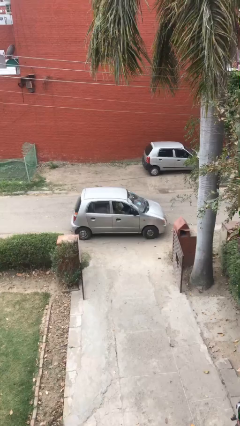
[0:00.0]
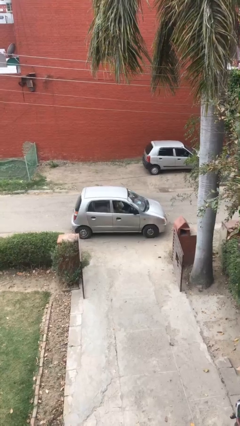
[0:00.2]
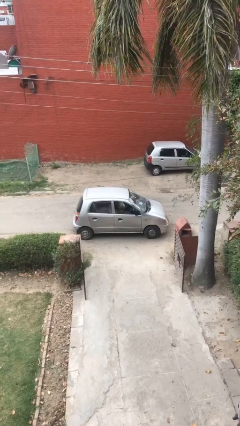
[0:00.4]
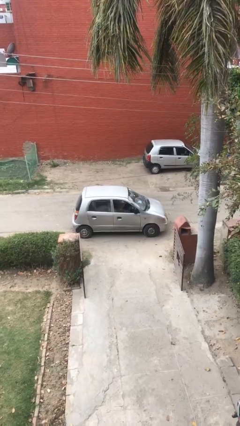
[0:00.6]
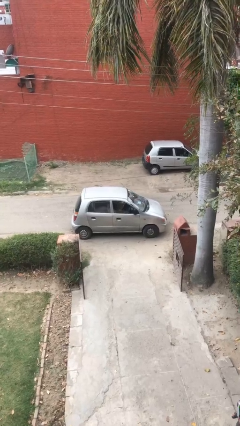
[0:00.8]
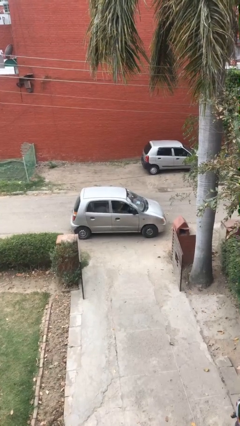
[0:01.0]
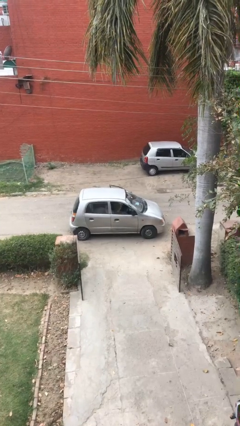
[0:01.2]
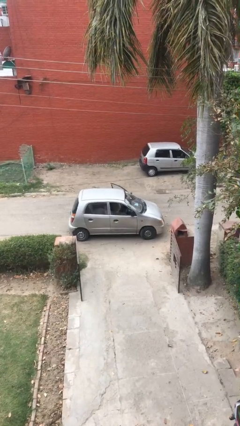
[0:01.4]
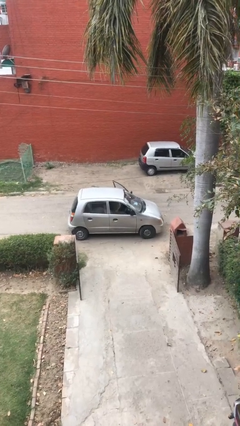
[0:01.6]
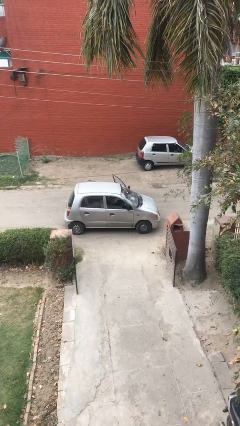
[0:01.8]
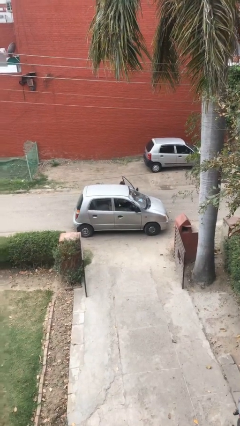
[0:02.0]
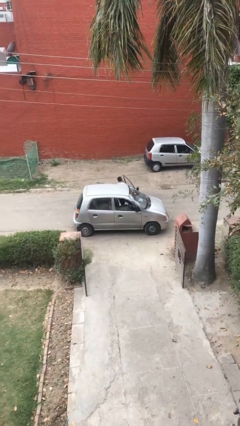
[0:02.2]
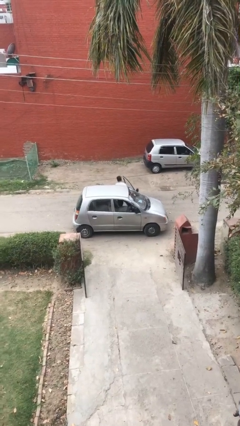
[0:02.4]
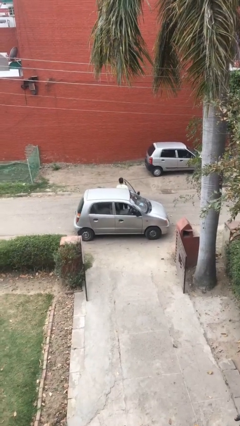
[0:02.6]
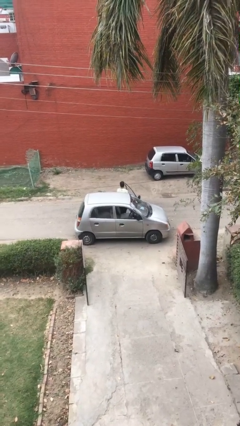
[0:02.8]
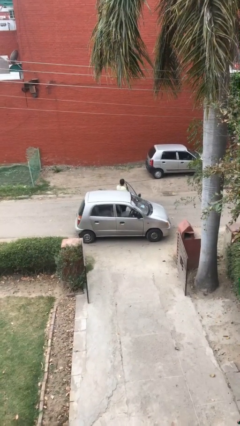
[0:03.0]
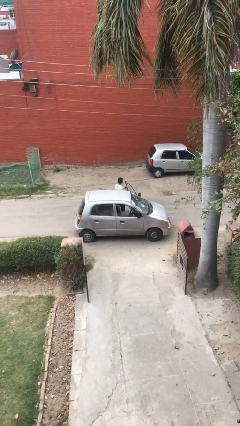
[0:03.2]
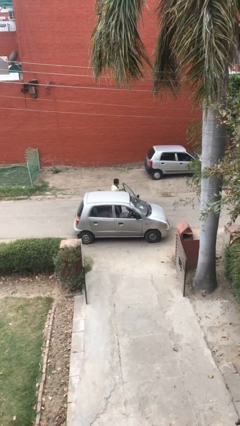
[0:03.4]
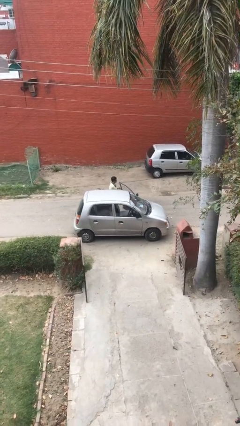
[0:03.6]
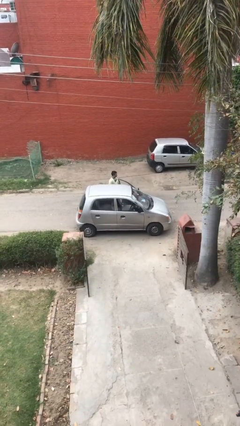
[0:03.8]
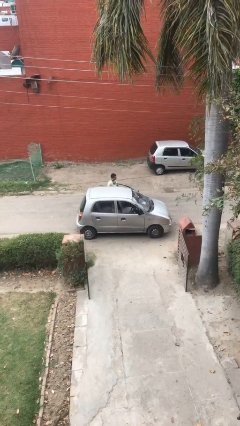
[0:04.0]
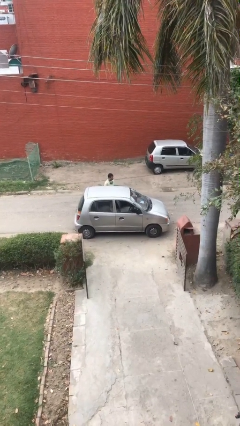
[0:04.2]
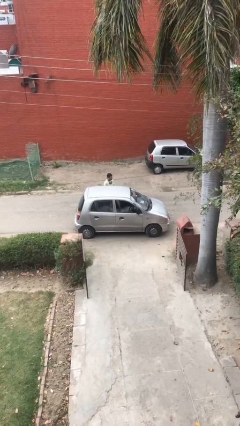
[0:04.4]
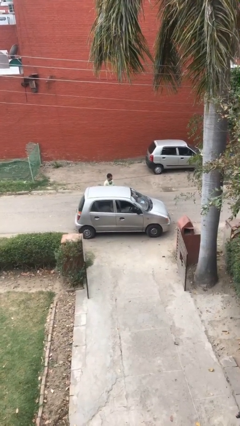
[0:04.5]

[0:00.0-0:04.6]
car drops off person

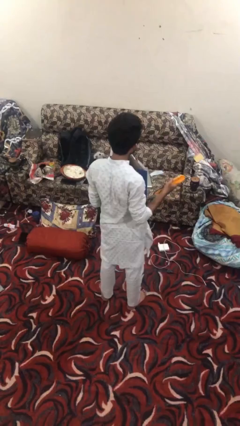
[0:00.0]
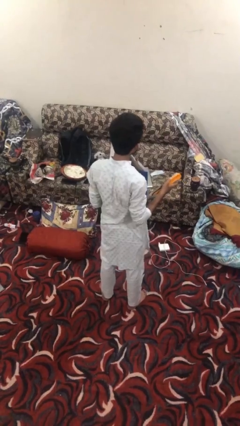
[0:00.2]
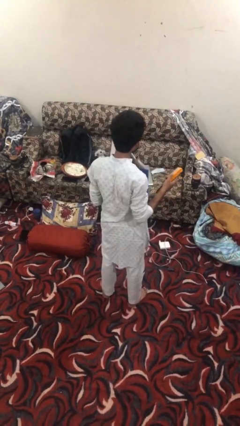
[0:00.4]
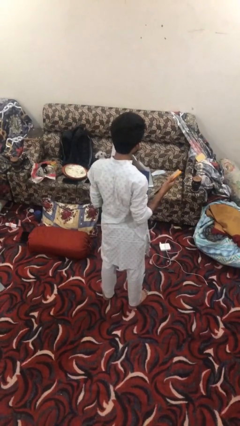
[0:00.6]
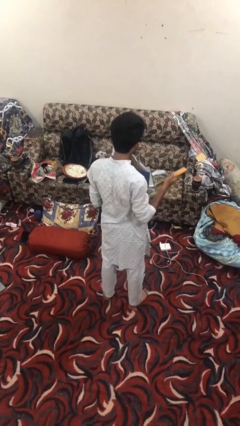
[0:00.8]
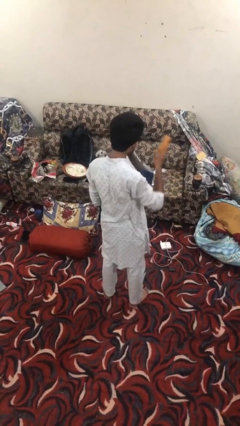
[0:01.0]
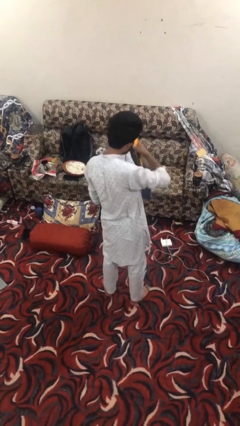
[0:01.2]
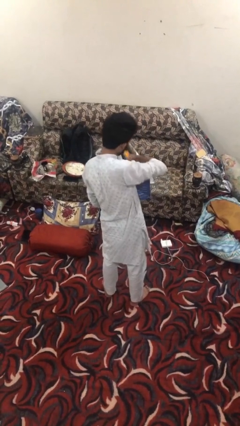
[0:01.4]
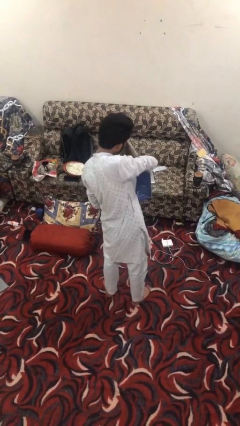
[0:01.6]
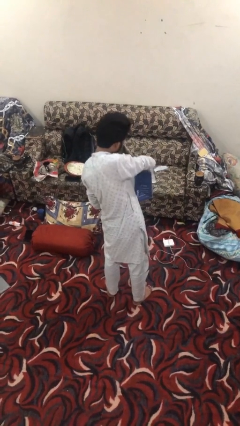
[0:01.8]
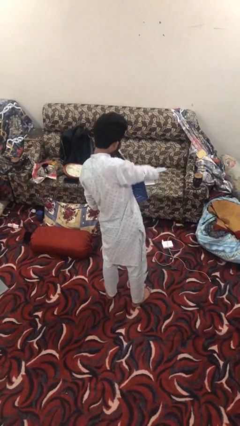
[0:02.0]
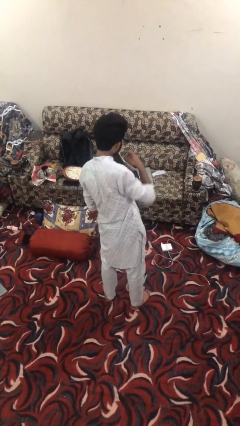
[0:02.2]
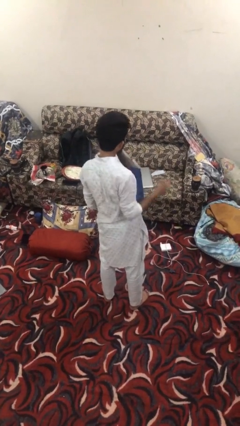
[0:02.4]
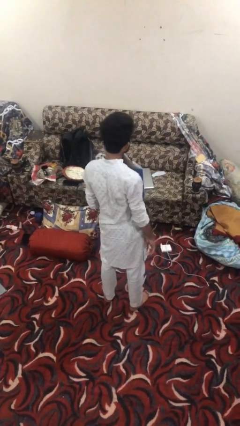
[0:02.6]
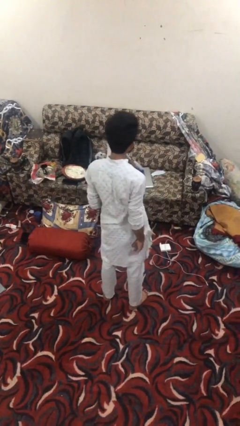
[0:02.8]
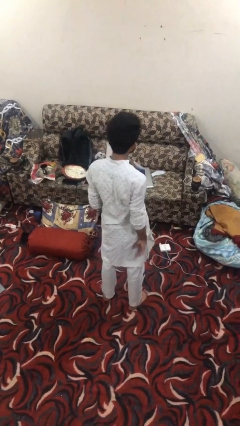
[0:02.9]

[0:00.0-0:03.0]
person puts object into bag

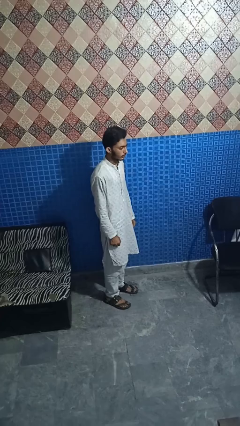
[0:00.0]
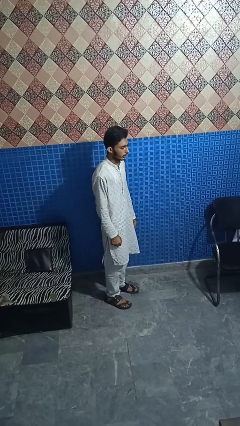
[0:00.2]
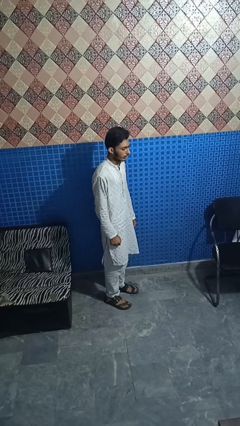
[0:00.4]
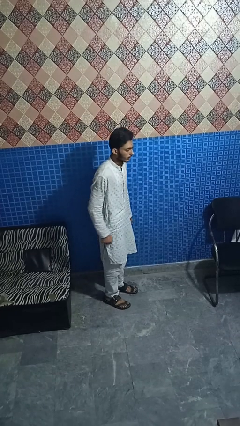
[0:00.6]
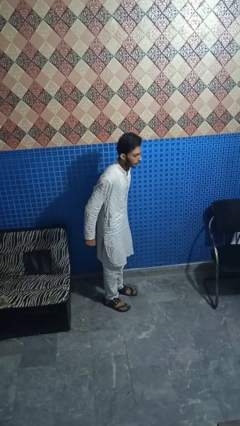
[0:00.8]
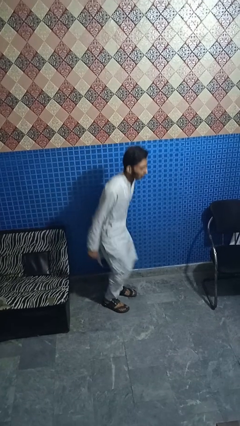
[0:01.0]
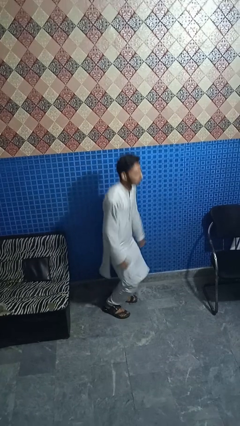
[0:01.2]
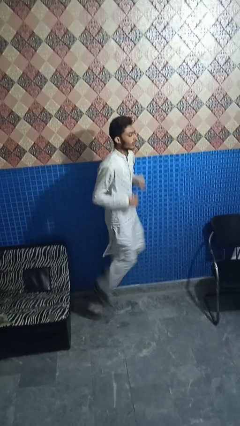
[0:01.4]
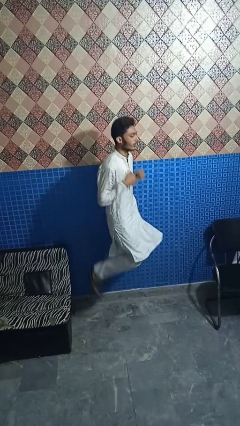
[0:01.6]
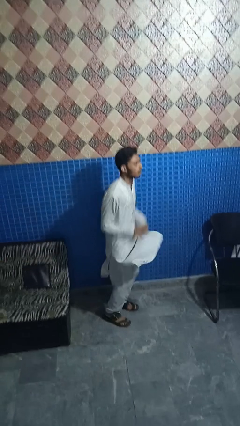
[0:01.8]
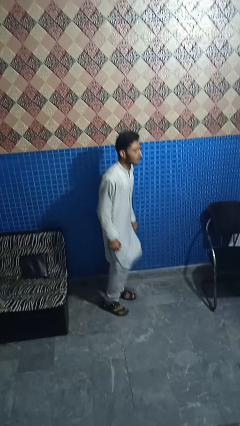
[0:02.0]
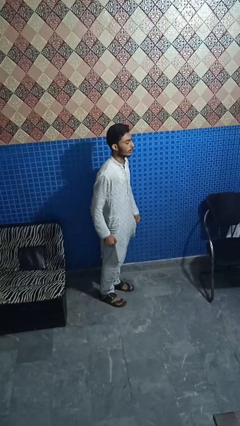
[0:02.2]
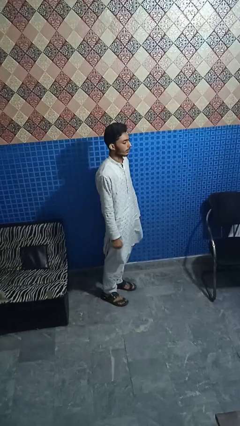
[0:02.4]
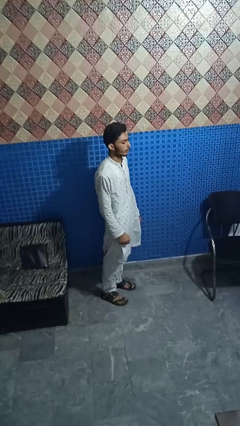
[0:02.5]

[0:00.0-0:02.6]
person jumps

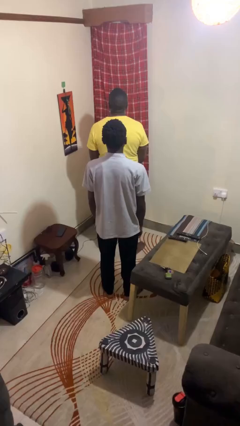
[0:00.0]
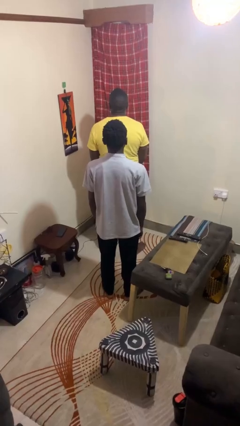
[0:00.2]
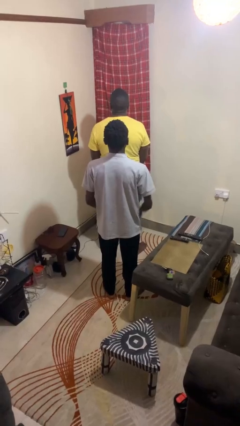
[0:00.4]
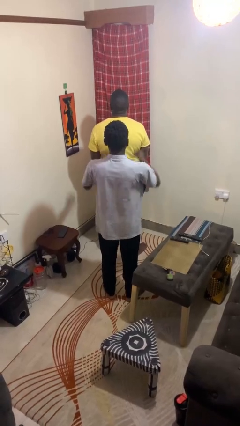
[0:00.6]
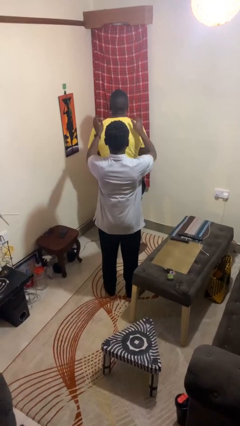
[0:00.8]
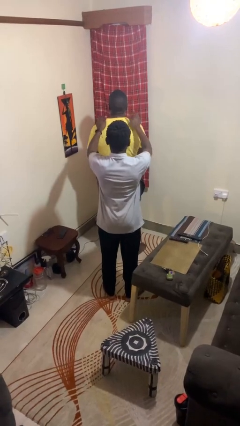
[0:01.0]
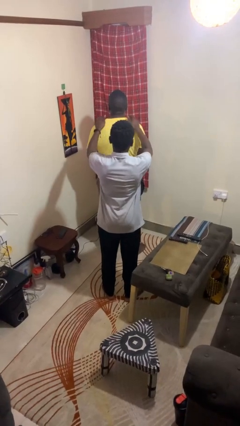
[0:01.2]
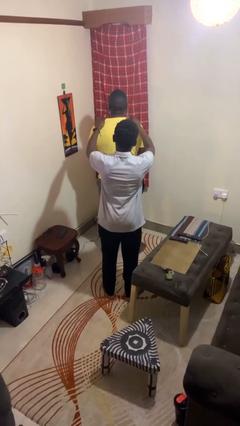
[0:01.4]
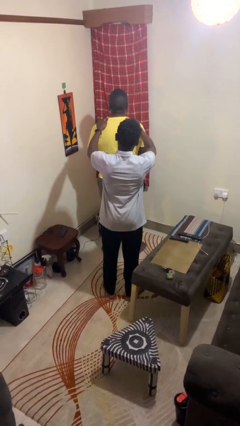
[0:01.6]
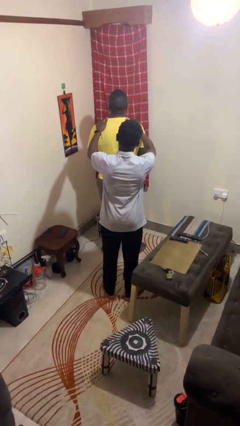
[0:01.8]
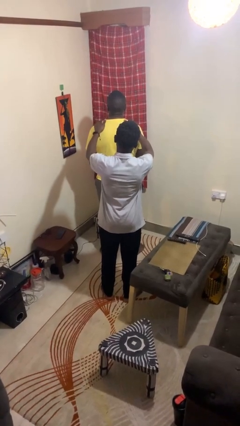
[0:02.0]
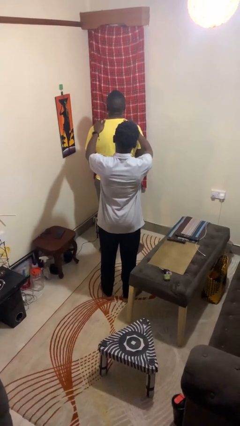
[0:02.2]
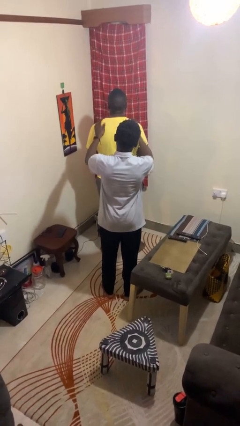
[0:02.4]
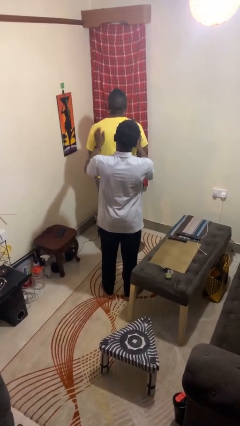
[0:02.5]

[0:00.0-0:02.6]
person touches back of person

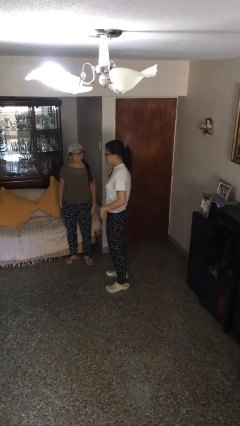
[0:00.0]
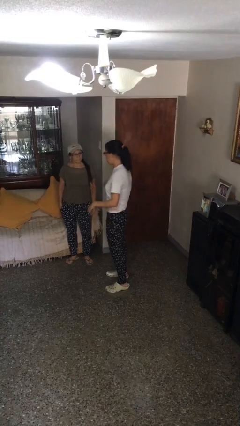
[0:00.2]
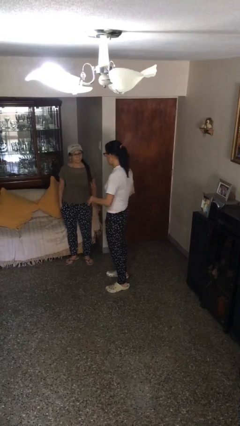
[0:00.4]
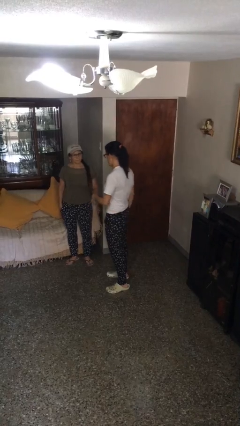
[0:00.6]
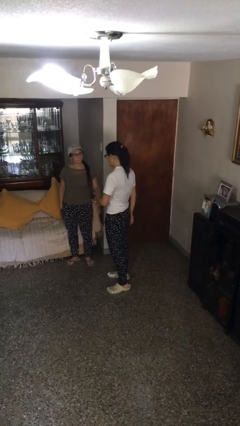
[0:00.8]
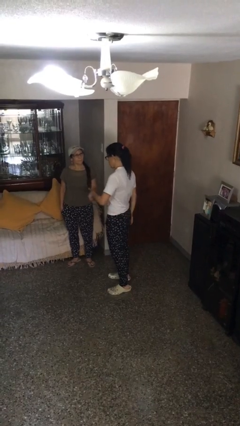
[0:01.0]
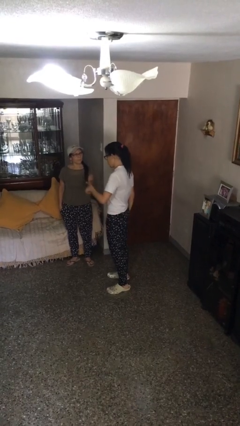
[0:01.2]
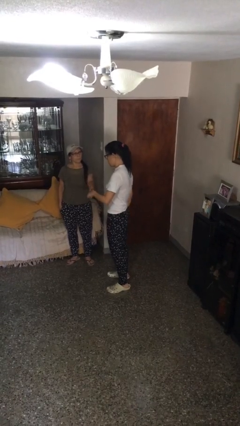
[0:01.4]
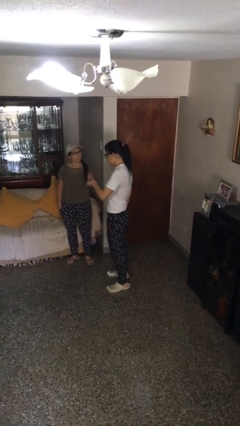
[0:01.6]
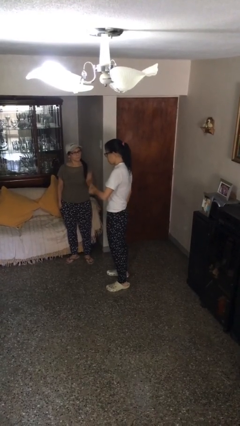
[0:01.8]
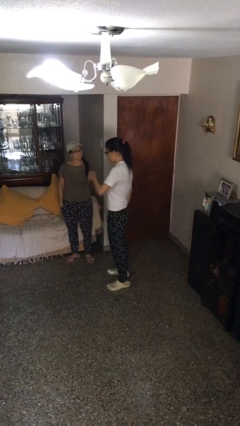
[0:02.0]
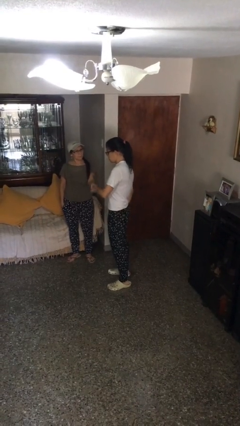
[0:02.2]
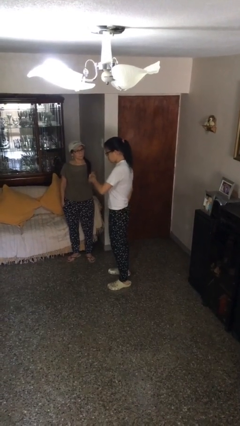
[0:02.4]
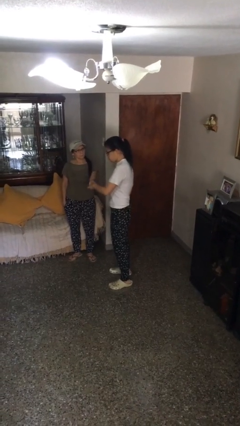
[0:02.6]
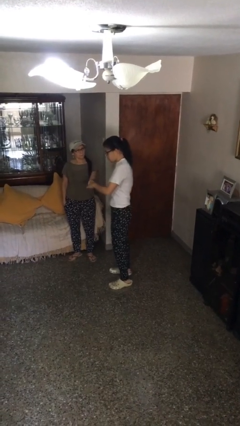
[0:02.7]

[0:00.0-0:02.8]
person shakes hand

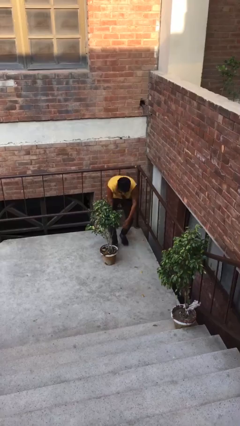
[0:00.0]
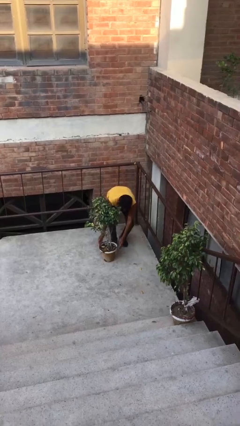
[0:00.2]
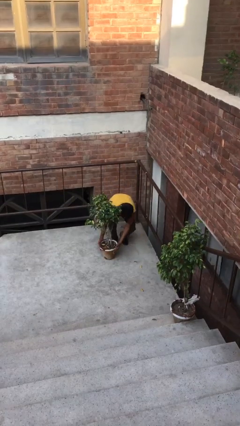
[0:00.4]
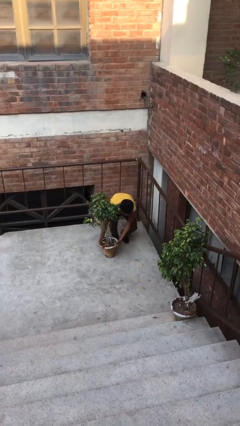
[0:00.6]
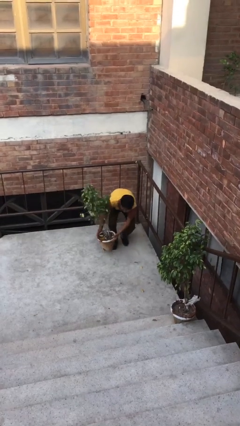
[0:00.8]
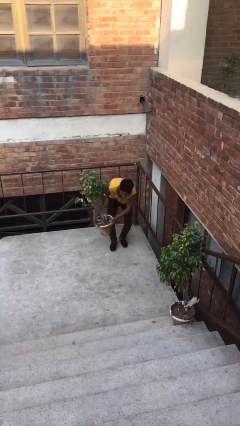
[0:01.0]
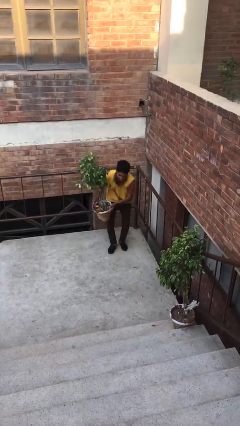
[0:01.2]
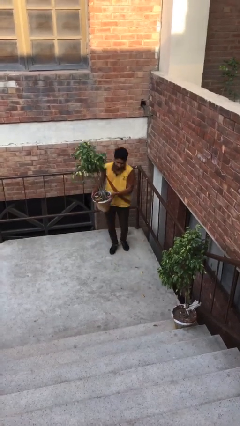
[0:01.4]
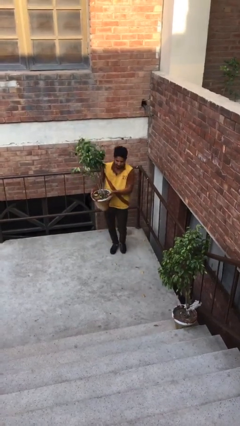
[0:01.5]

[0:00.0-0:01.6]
person picks up object from floor

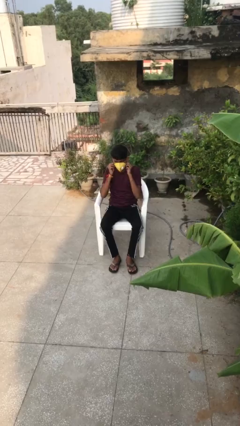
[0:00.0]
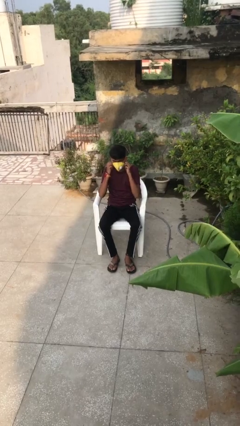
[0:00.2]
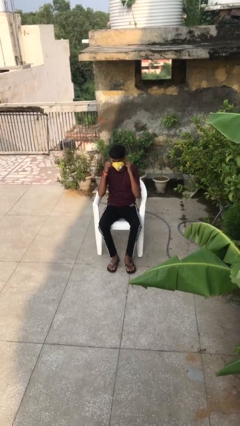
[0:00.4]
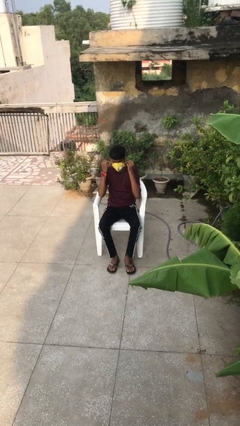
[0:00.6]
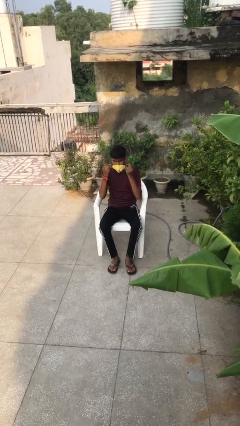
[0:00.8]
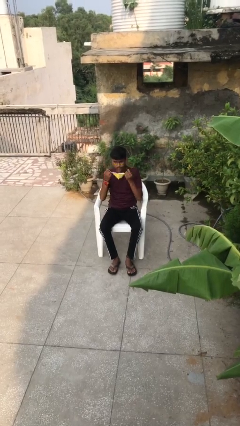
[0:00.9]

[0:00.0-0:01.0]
person takes off facemask
